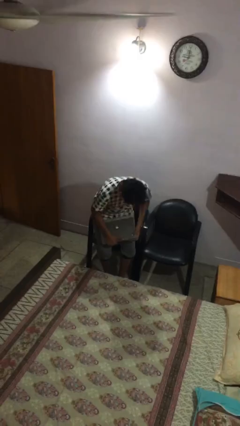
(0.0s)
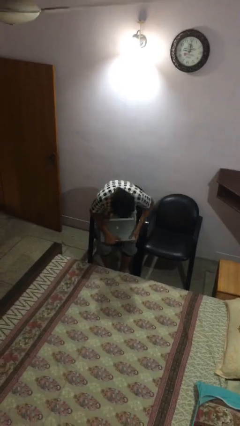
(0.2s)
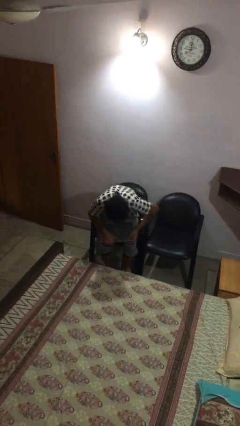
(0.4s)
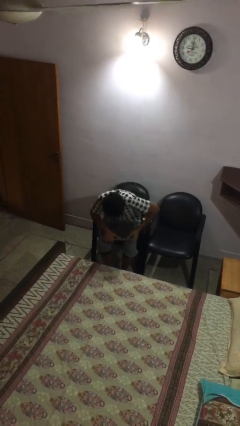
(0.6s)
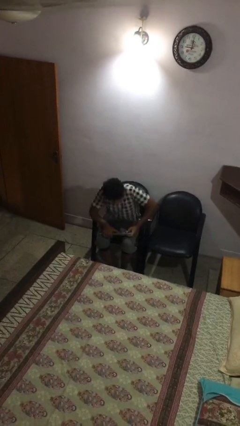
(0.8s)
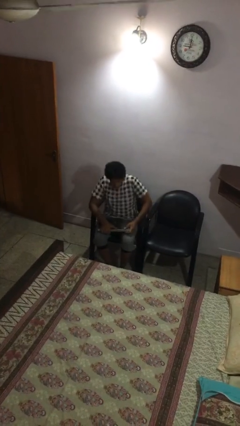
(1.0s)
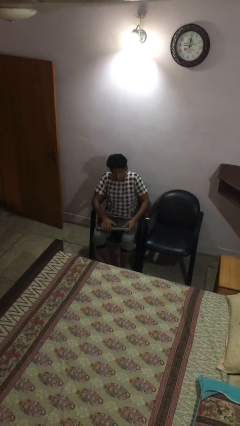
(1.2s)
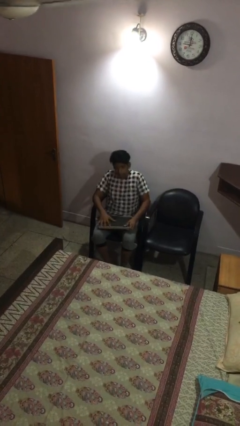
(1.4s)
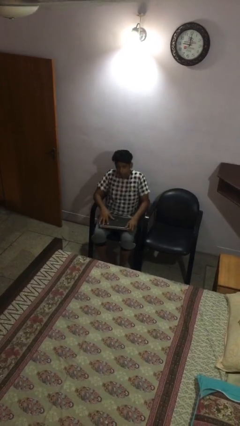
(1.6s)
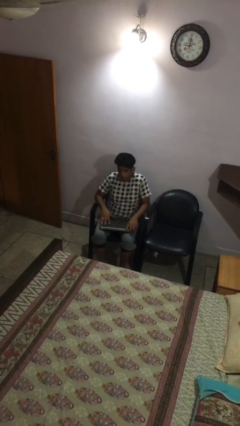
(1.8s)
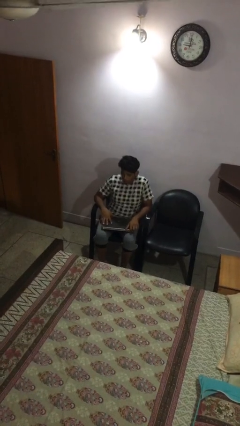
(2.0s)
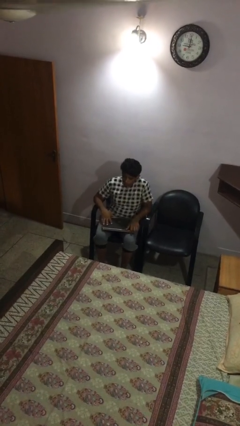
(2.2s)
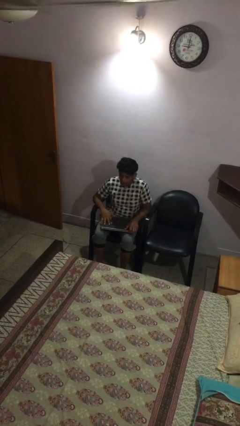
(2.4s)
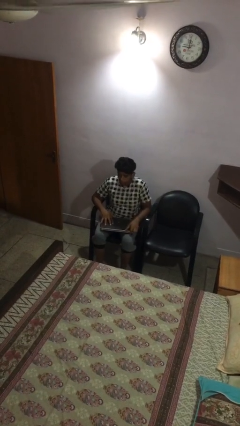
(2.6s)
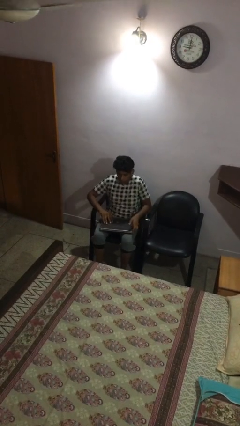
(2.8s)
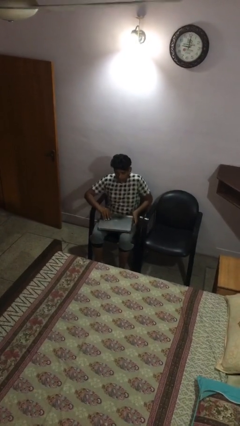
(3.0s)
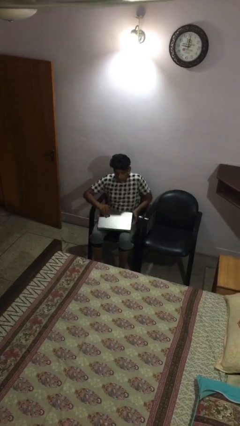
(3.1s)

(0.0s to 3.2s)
person sits down

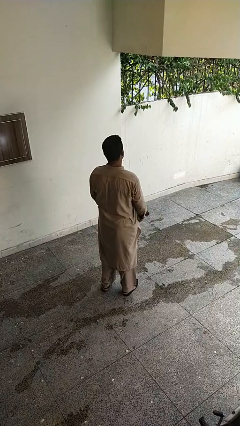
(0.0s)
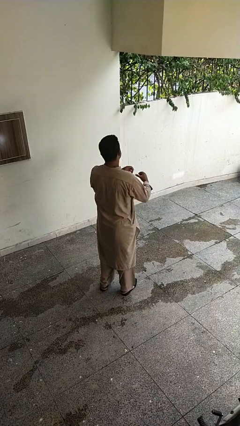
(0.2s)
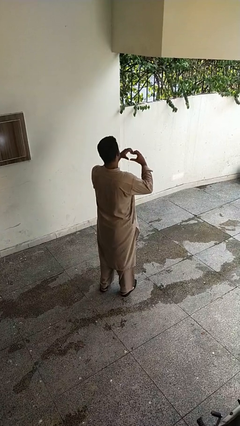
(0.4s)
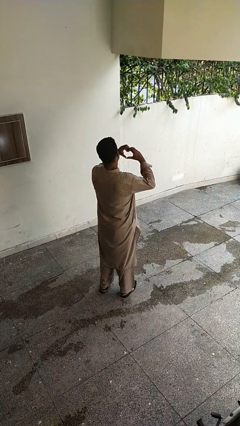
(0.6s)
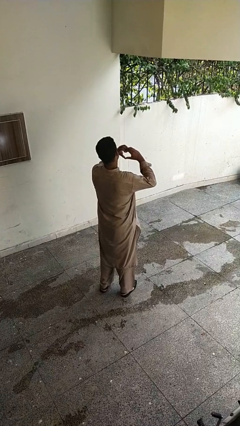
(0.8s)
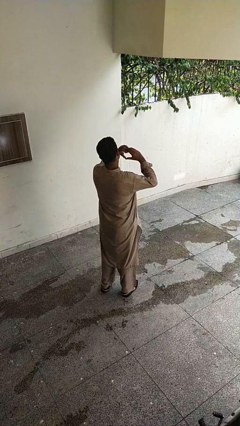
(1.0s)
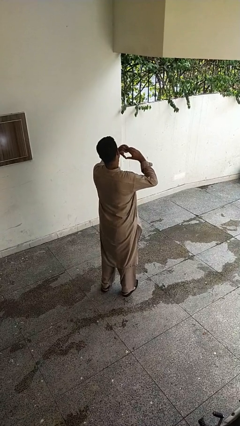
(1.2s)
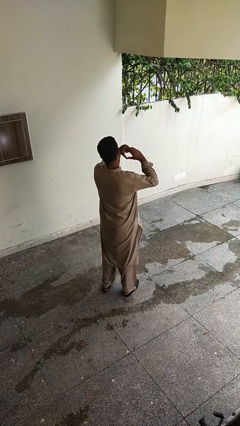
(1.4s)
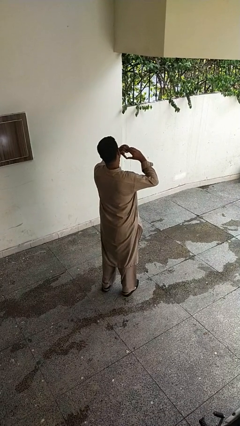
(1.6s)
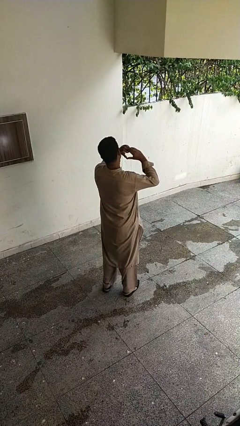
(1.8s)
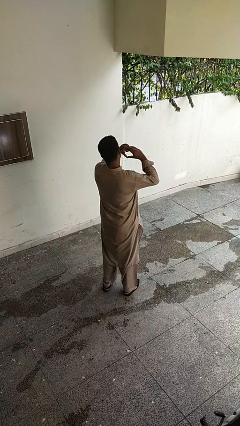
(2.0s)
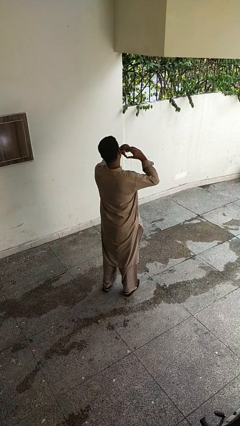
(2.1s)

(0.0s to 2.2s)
person gestures heart

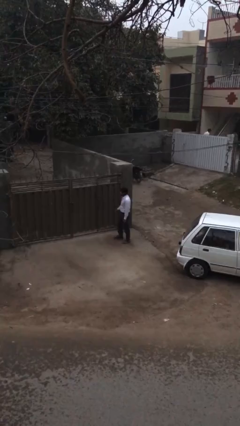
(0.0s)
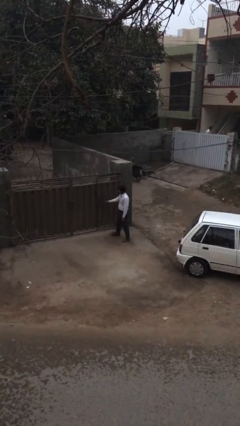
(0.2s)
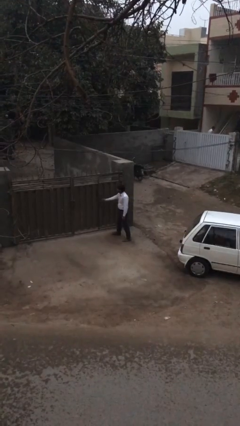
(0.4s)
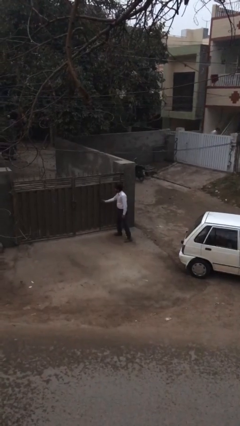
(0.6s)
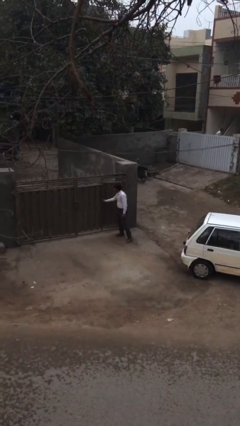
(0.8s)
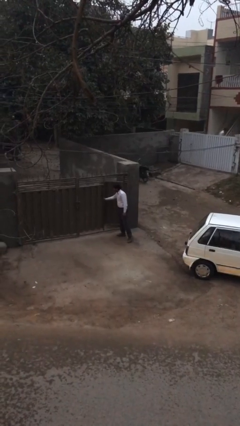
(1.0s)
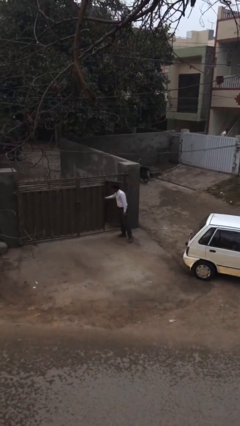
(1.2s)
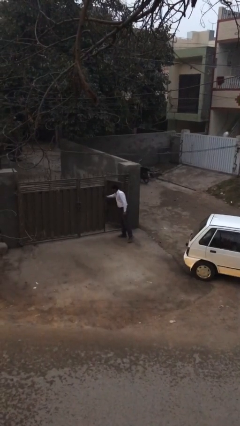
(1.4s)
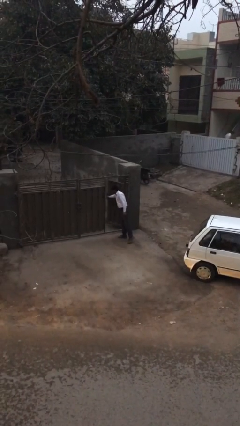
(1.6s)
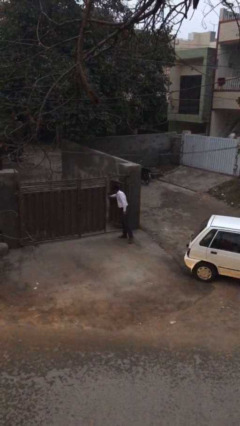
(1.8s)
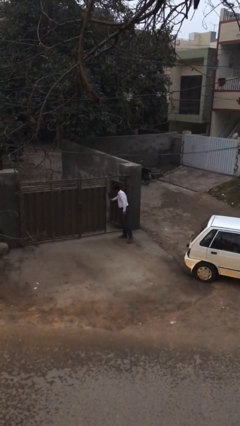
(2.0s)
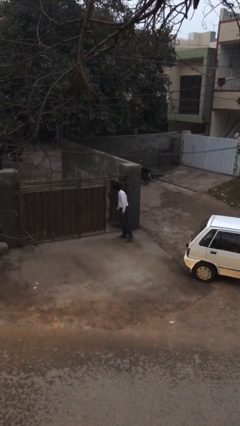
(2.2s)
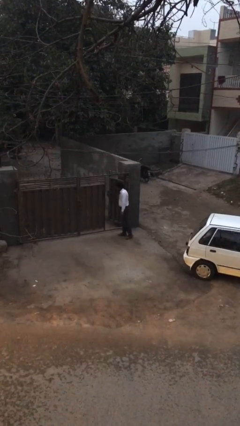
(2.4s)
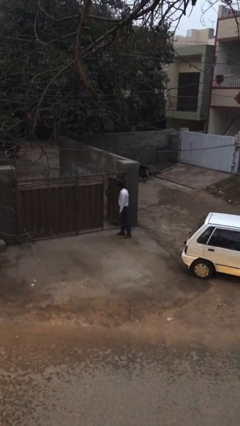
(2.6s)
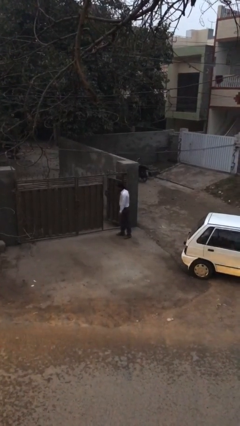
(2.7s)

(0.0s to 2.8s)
person opens facility door

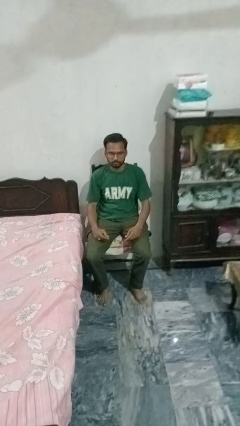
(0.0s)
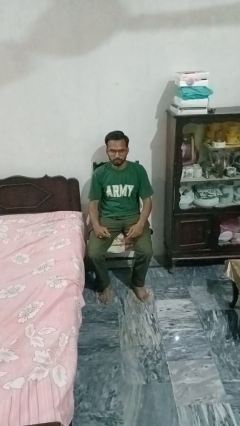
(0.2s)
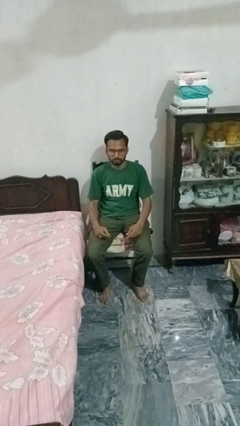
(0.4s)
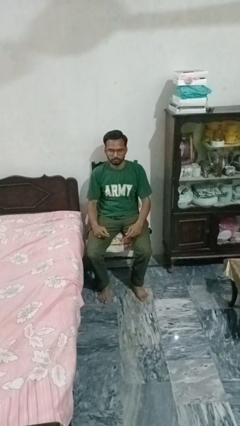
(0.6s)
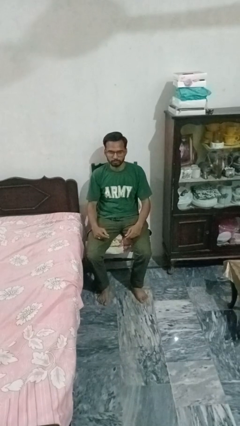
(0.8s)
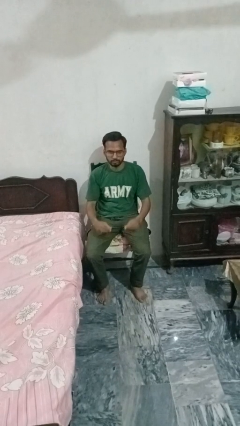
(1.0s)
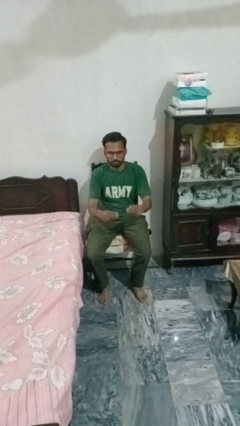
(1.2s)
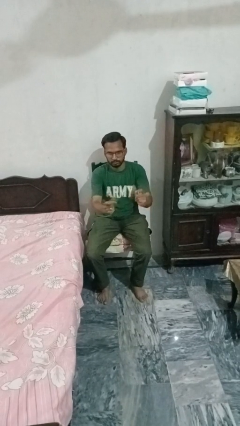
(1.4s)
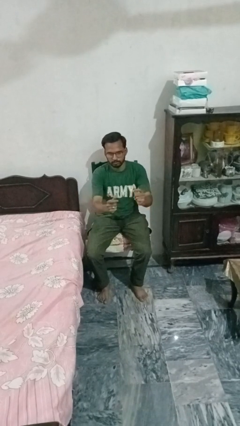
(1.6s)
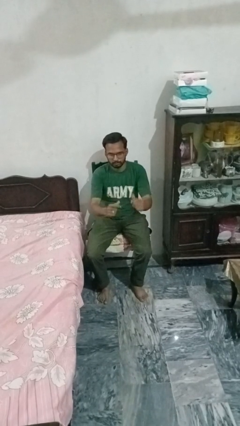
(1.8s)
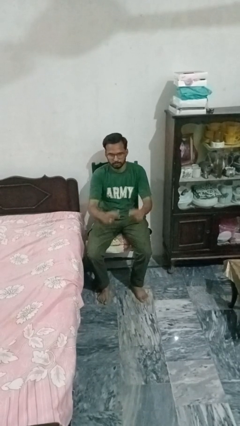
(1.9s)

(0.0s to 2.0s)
person snaps fingers

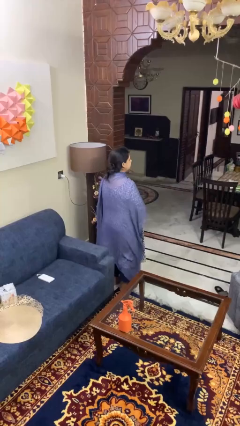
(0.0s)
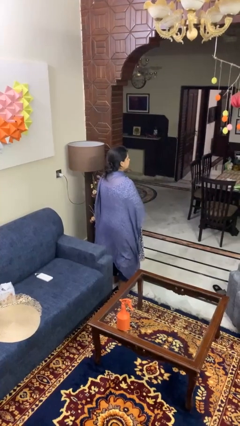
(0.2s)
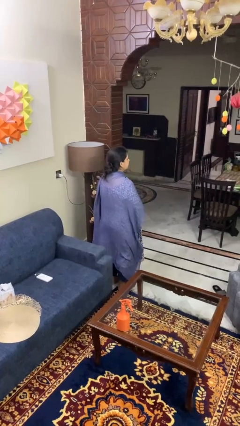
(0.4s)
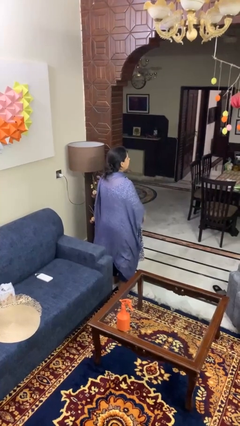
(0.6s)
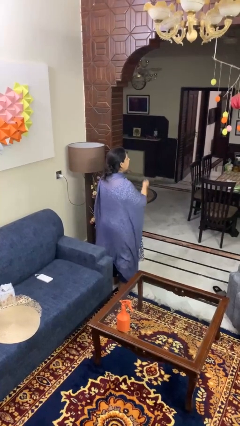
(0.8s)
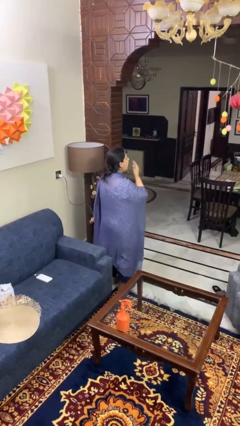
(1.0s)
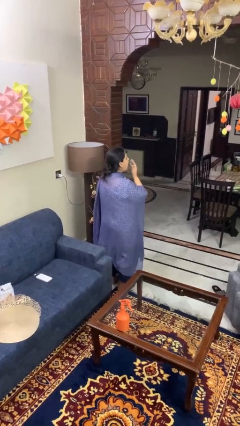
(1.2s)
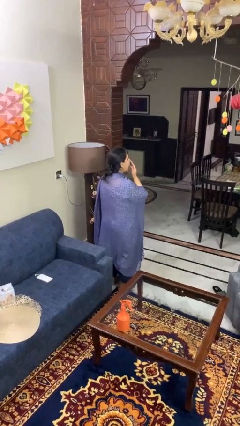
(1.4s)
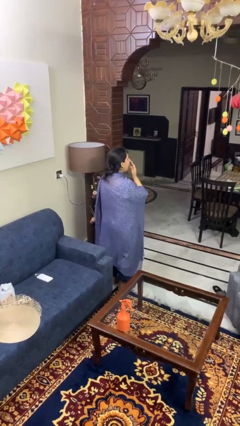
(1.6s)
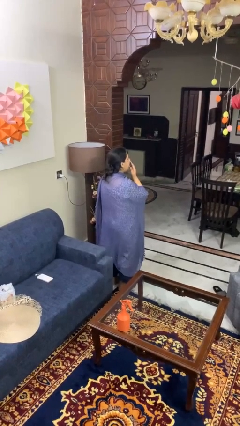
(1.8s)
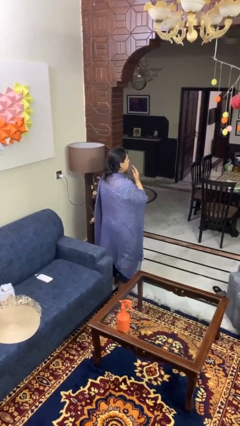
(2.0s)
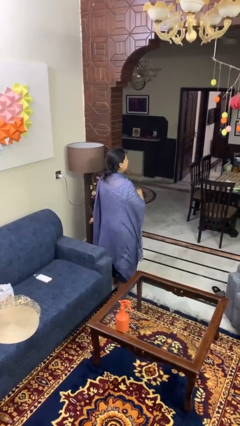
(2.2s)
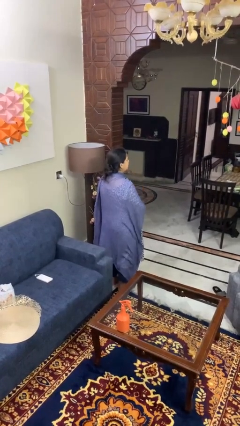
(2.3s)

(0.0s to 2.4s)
person yawns

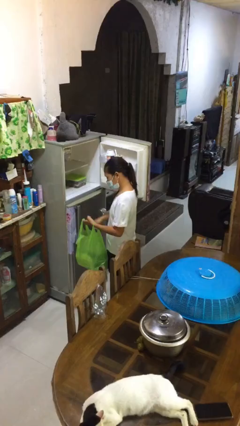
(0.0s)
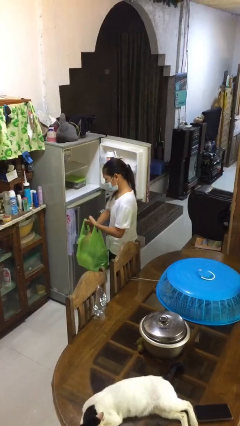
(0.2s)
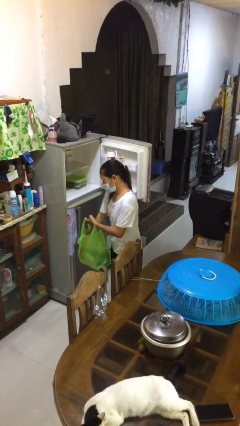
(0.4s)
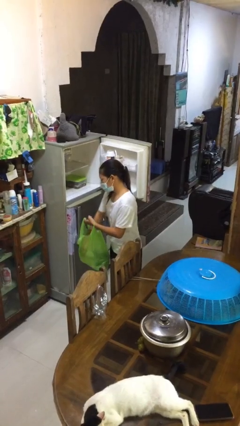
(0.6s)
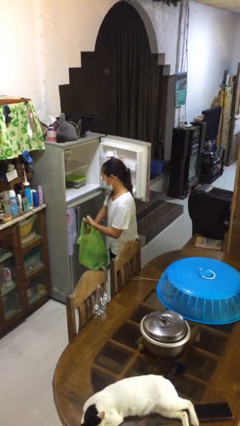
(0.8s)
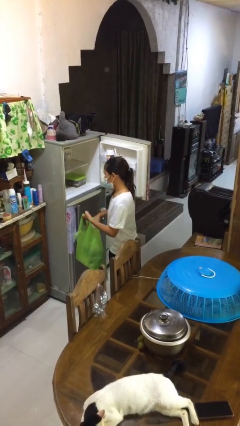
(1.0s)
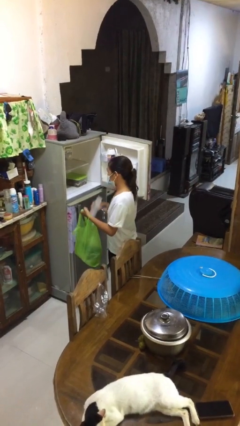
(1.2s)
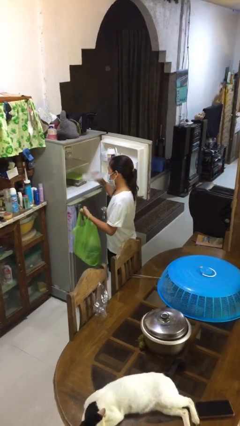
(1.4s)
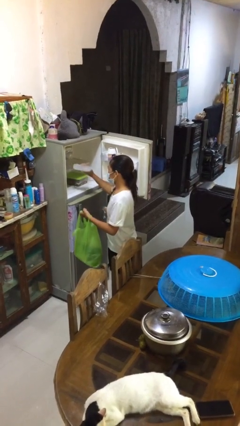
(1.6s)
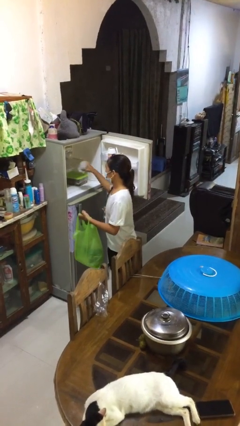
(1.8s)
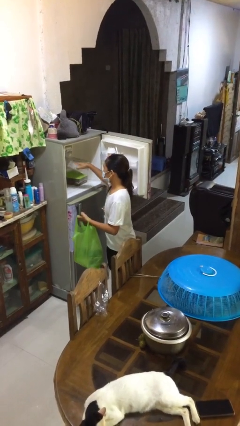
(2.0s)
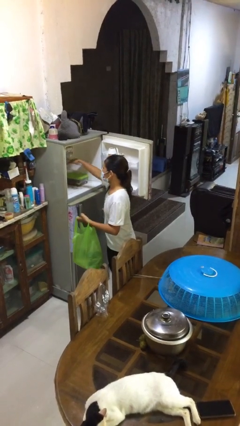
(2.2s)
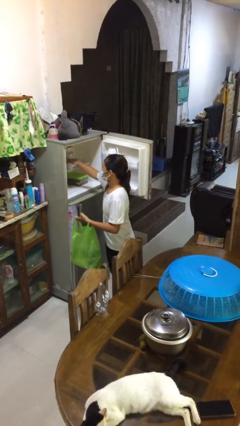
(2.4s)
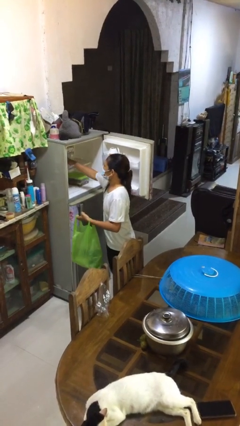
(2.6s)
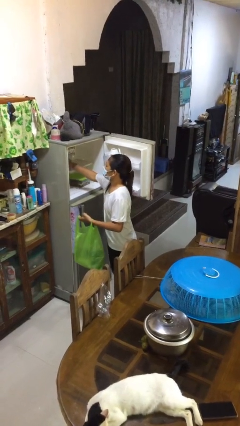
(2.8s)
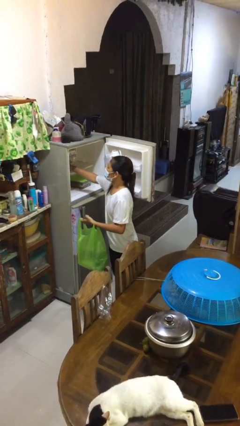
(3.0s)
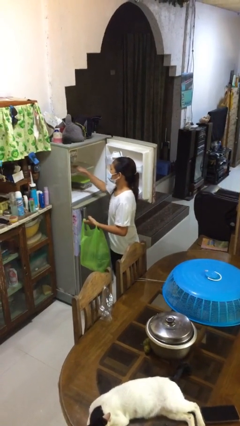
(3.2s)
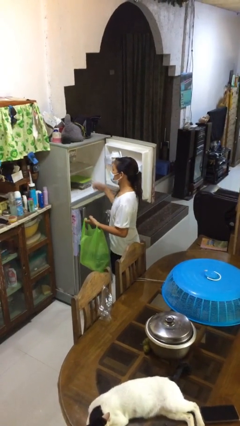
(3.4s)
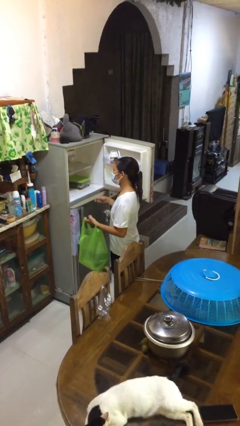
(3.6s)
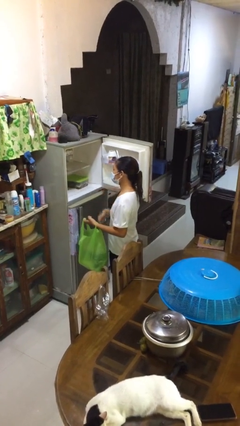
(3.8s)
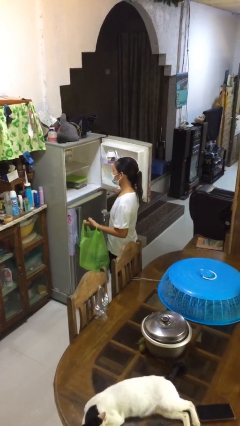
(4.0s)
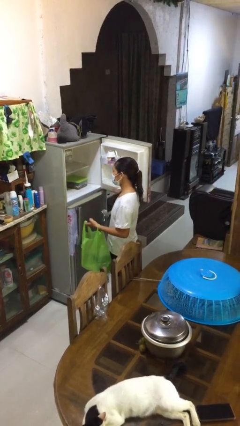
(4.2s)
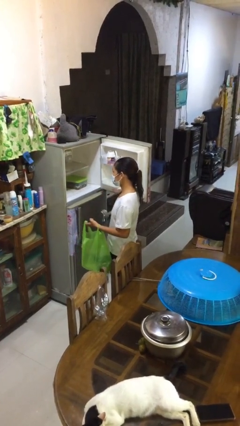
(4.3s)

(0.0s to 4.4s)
person loads groceries into refrigerator

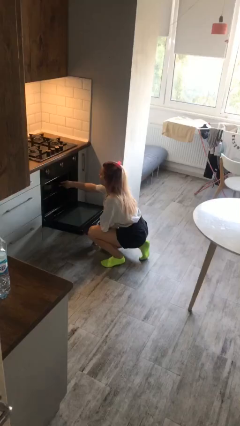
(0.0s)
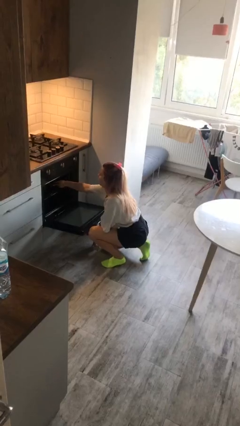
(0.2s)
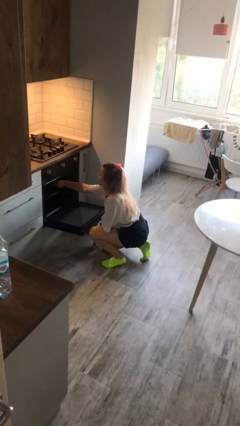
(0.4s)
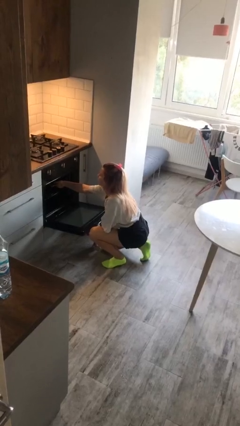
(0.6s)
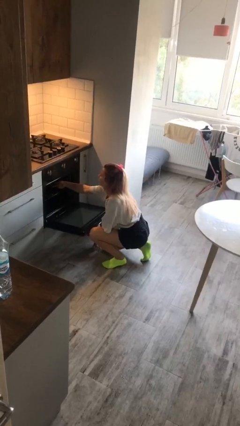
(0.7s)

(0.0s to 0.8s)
person puts object into oven
